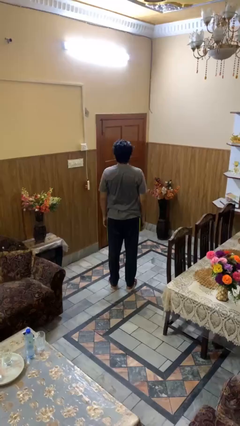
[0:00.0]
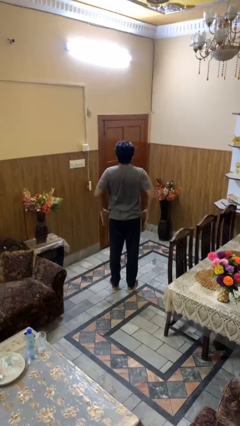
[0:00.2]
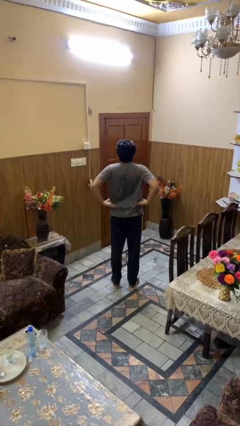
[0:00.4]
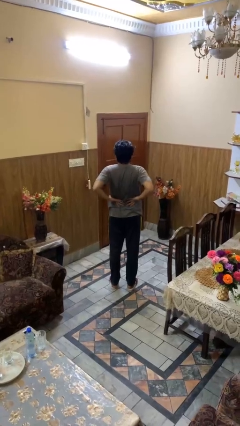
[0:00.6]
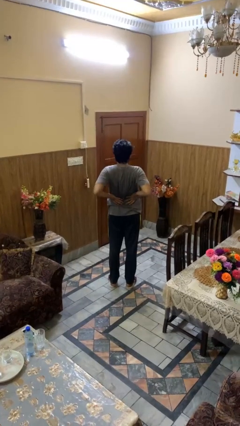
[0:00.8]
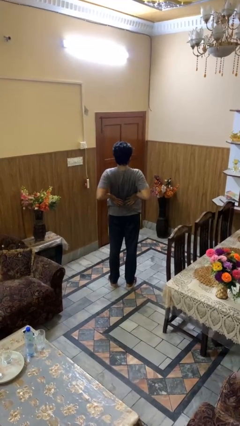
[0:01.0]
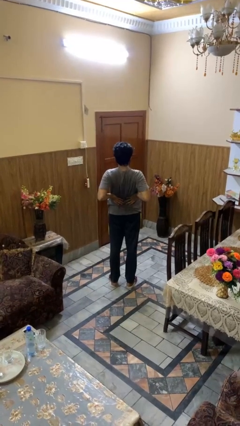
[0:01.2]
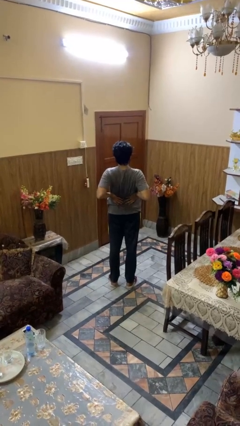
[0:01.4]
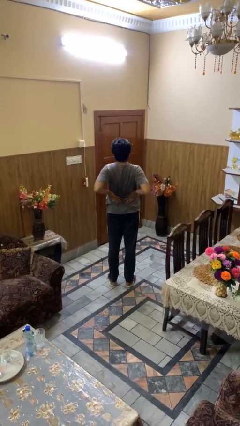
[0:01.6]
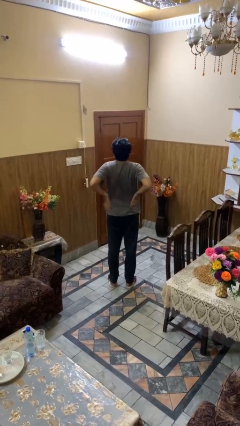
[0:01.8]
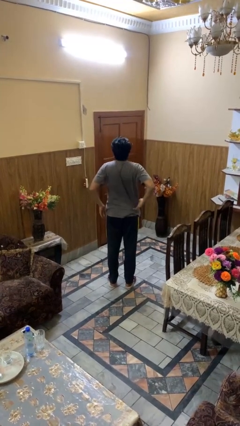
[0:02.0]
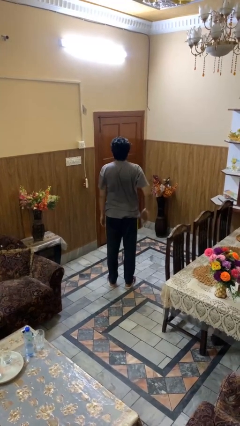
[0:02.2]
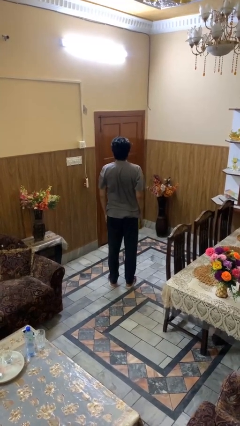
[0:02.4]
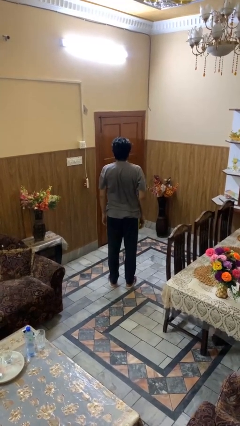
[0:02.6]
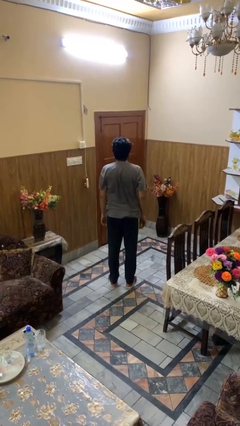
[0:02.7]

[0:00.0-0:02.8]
person stretches back

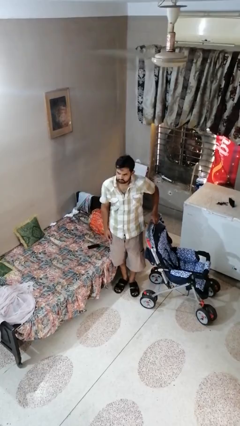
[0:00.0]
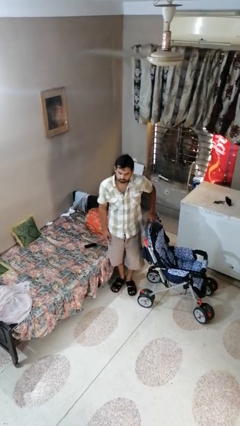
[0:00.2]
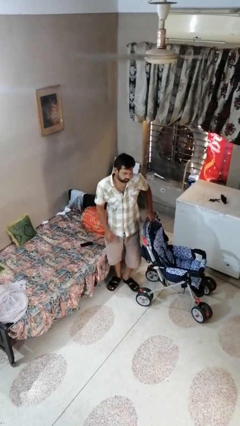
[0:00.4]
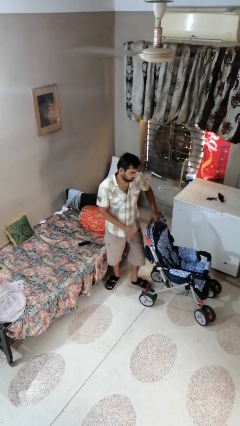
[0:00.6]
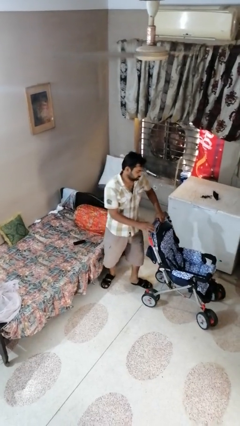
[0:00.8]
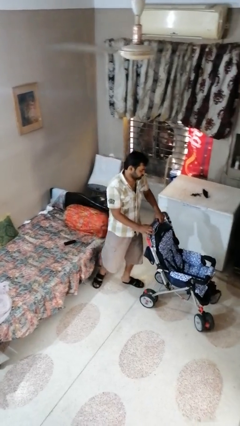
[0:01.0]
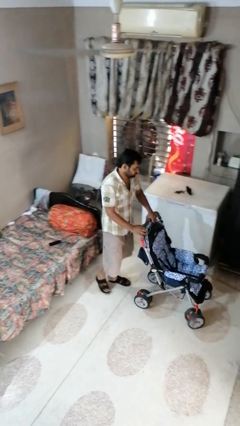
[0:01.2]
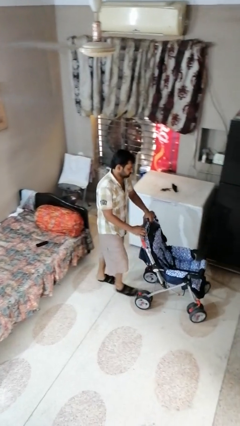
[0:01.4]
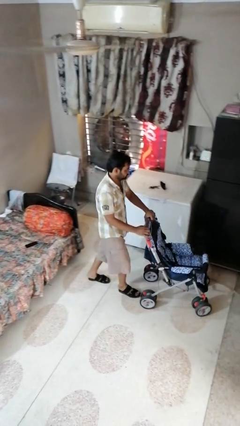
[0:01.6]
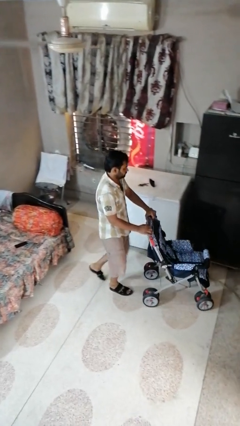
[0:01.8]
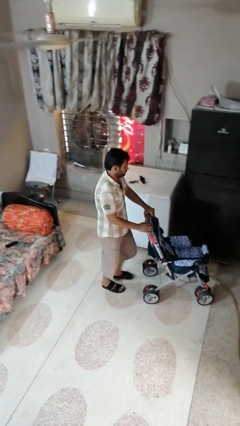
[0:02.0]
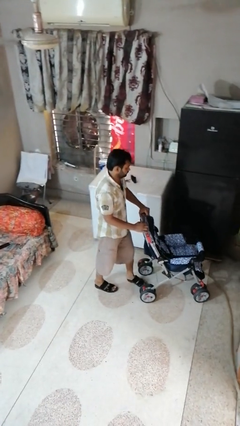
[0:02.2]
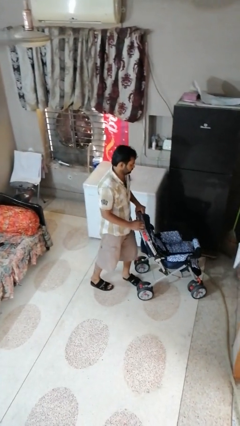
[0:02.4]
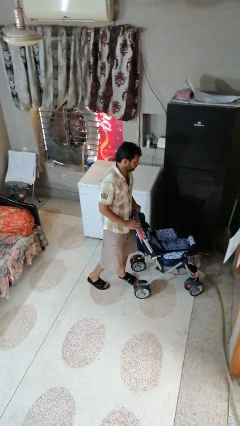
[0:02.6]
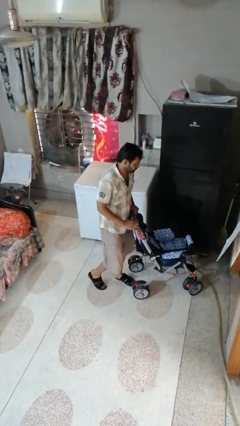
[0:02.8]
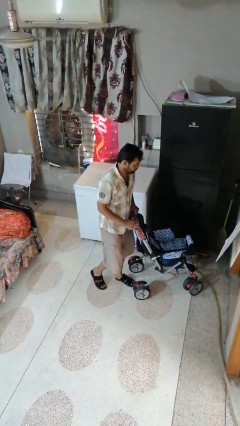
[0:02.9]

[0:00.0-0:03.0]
person pushes wheeled cart

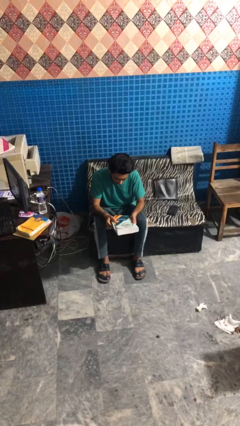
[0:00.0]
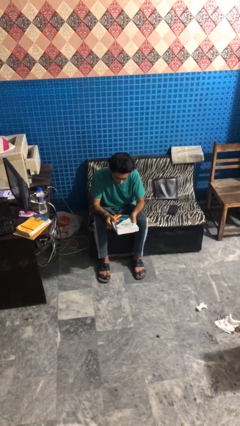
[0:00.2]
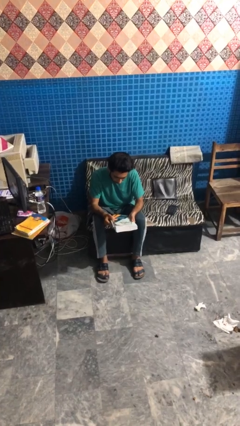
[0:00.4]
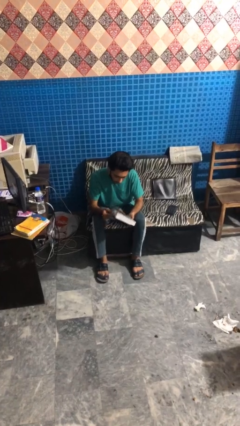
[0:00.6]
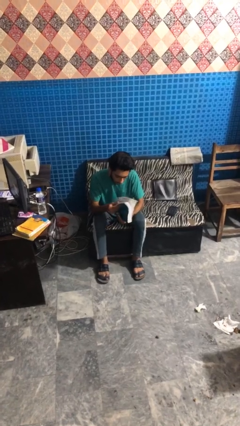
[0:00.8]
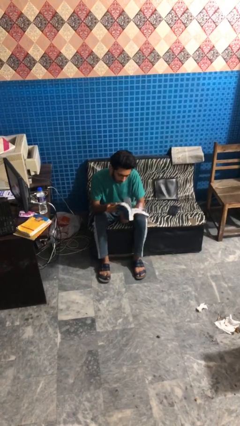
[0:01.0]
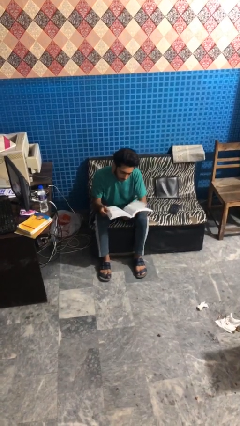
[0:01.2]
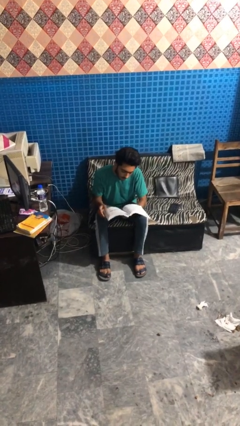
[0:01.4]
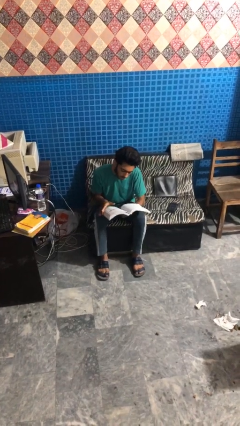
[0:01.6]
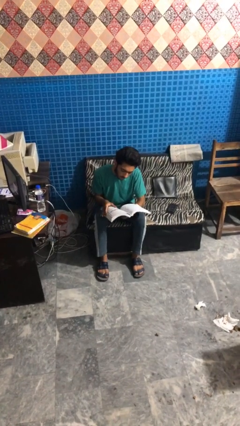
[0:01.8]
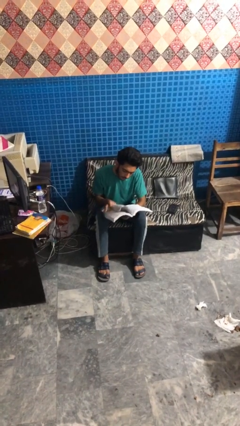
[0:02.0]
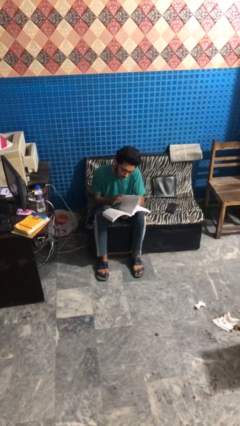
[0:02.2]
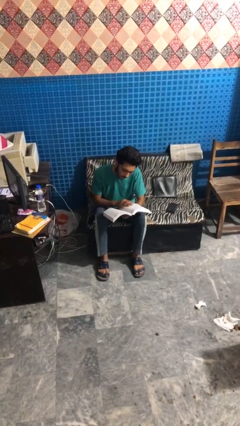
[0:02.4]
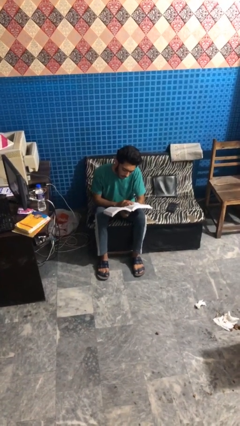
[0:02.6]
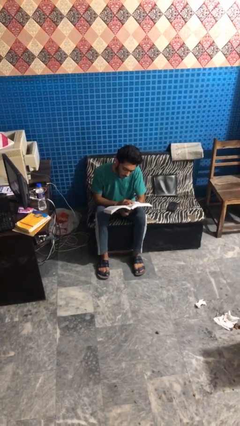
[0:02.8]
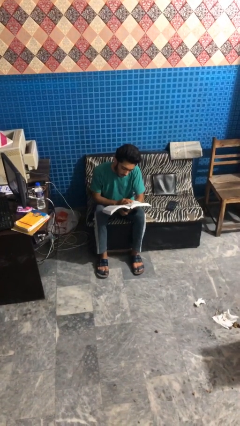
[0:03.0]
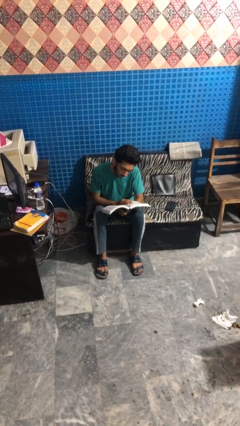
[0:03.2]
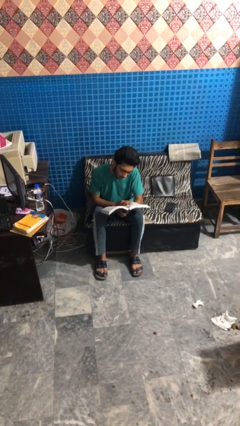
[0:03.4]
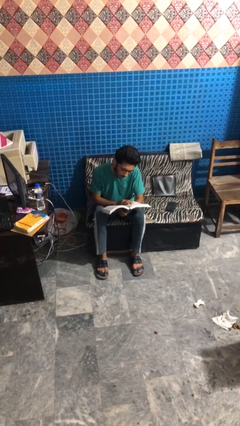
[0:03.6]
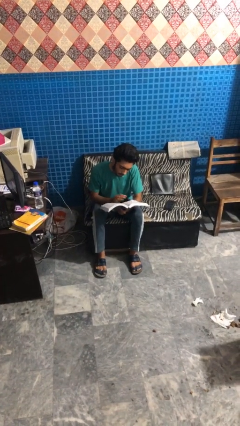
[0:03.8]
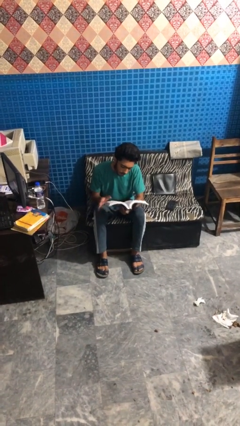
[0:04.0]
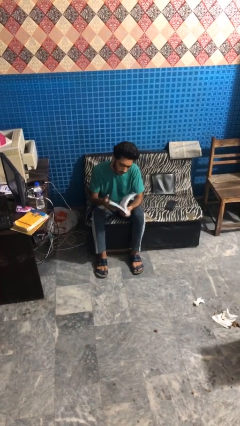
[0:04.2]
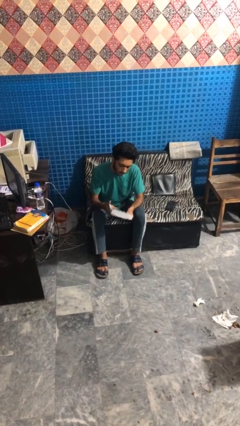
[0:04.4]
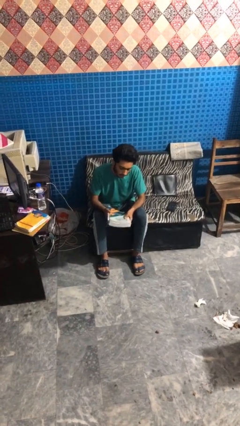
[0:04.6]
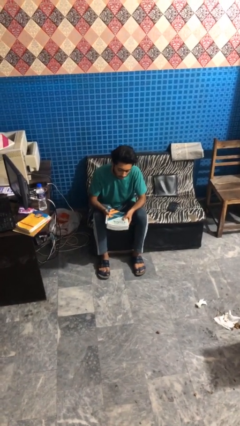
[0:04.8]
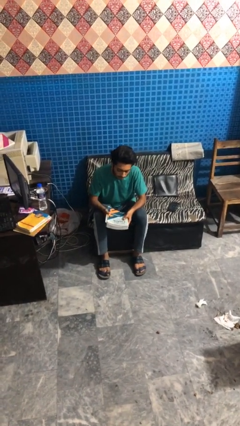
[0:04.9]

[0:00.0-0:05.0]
person reads book

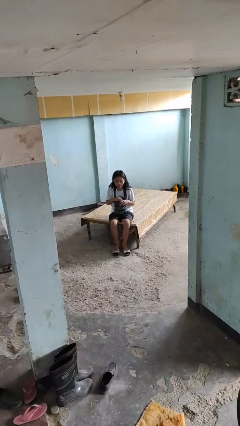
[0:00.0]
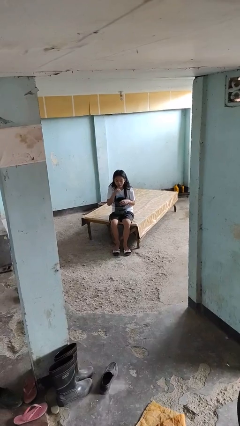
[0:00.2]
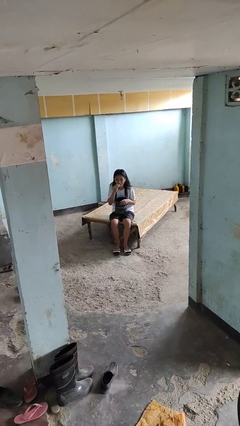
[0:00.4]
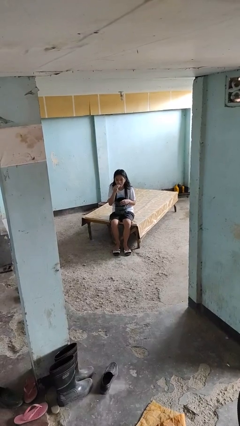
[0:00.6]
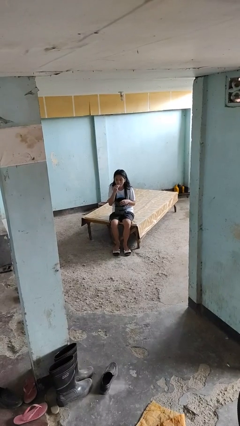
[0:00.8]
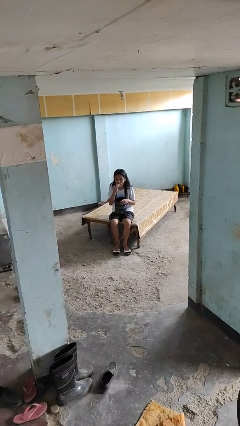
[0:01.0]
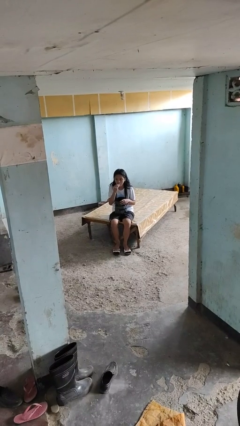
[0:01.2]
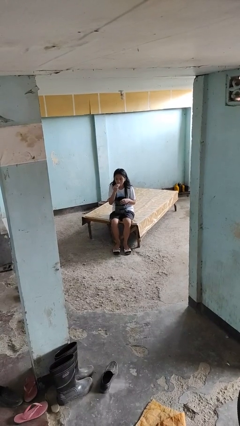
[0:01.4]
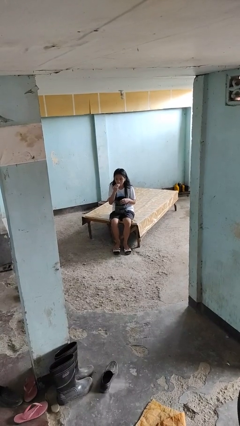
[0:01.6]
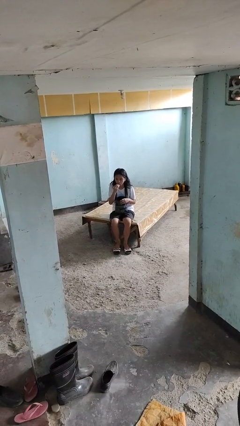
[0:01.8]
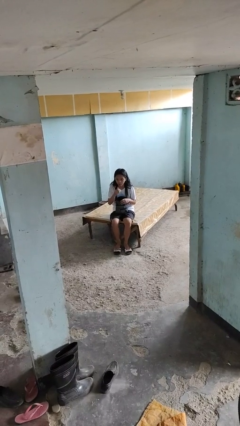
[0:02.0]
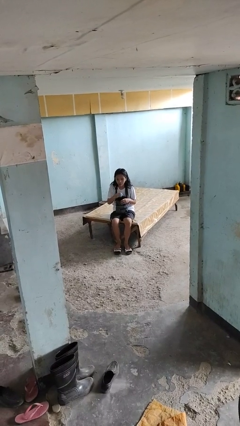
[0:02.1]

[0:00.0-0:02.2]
person eats snack from bag

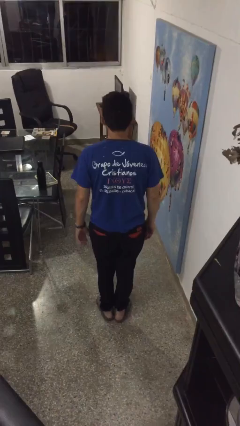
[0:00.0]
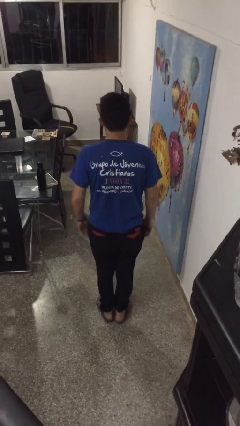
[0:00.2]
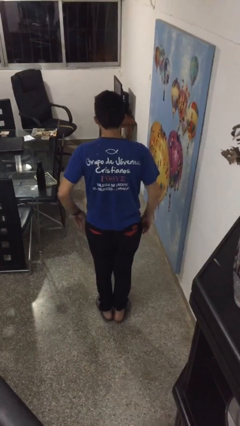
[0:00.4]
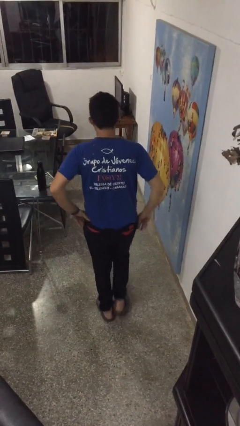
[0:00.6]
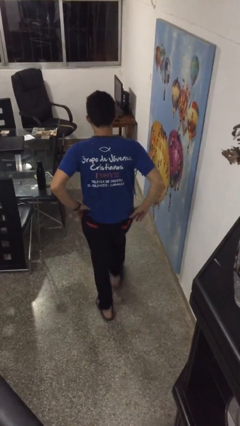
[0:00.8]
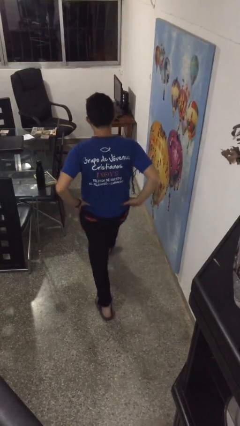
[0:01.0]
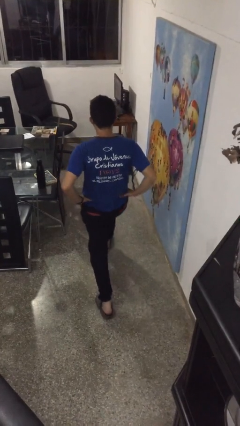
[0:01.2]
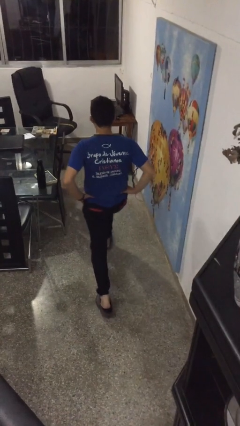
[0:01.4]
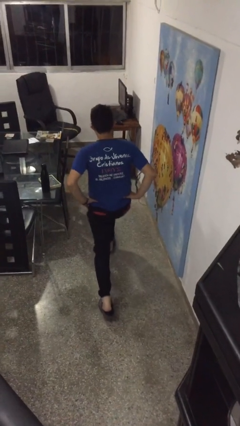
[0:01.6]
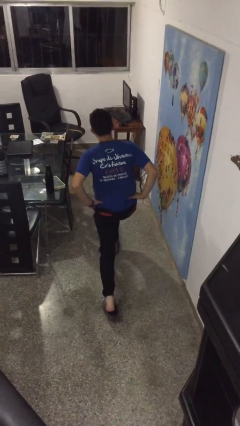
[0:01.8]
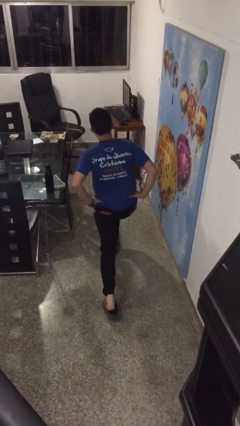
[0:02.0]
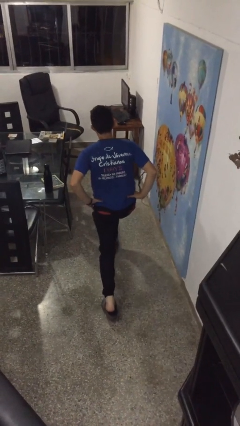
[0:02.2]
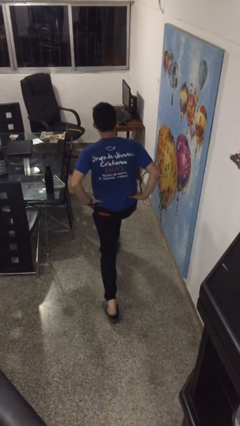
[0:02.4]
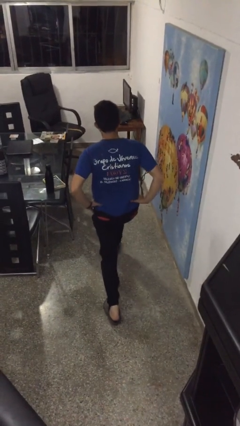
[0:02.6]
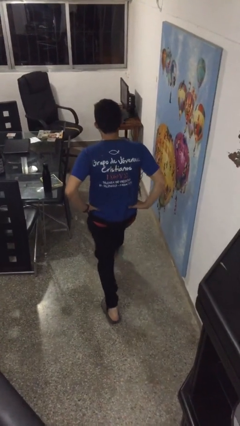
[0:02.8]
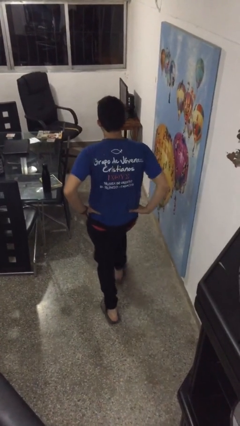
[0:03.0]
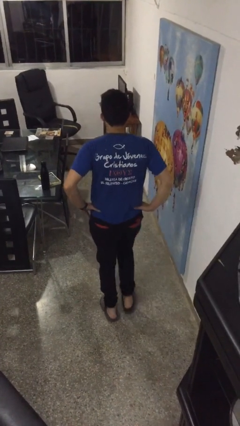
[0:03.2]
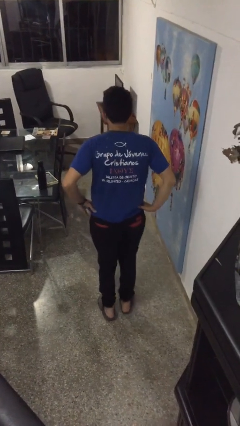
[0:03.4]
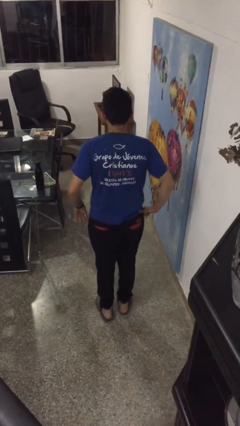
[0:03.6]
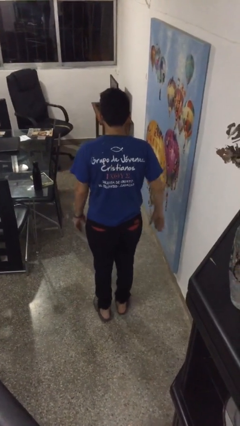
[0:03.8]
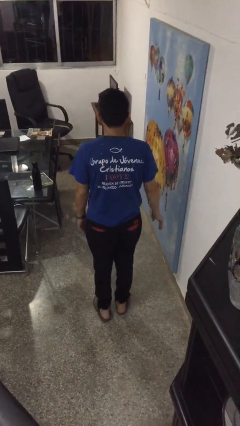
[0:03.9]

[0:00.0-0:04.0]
person exercises with lunges

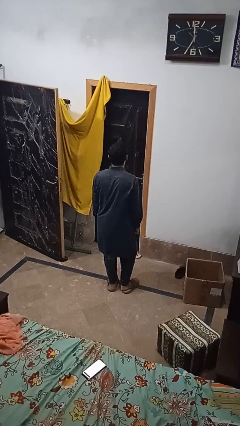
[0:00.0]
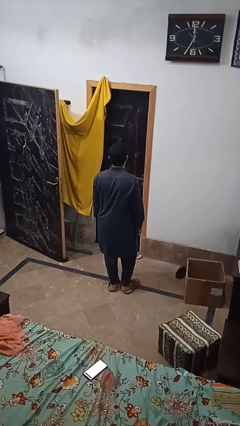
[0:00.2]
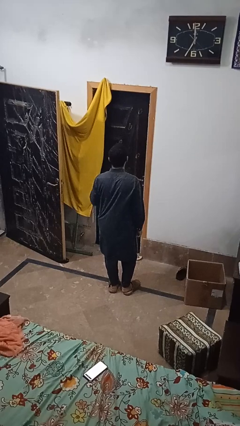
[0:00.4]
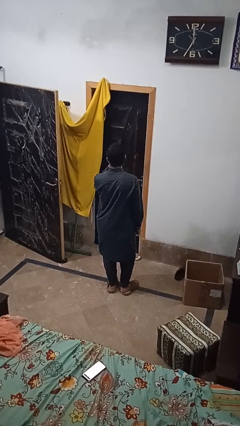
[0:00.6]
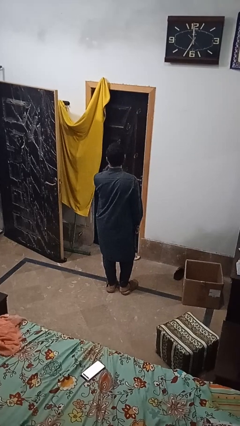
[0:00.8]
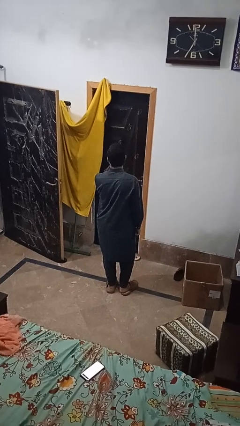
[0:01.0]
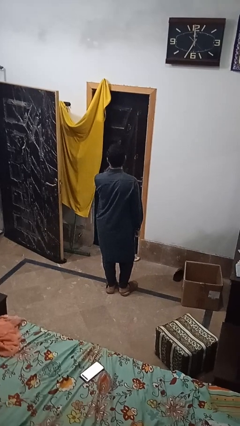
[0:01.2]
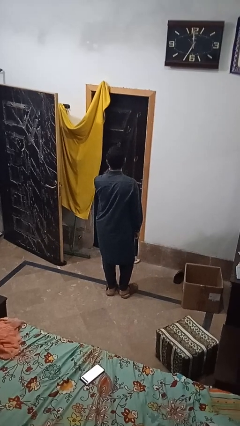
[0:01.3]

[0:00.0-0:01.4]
person gestures be quiet
